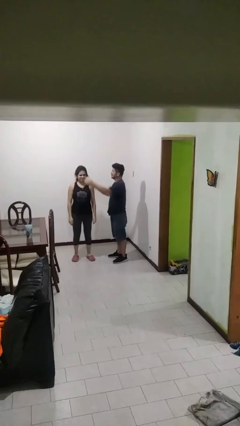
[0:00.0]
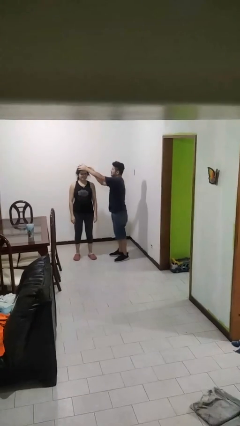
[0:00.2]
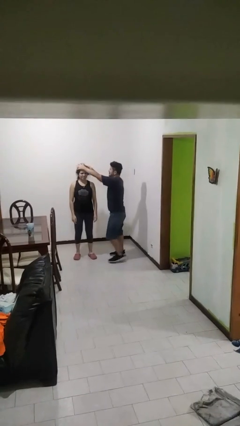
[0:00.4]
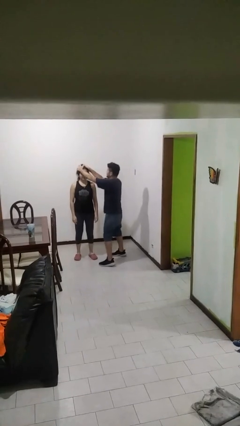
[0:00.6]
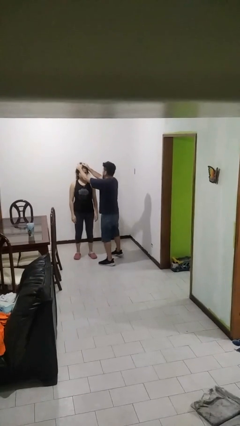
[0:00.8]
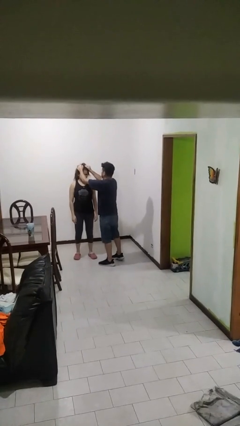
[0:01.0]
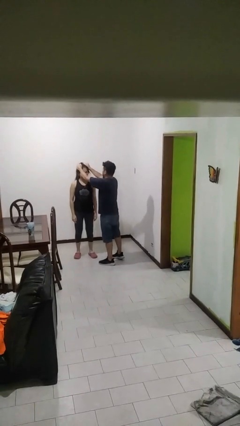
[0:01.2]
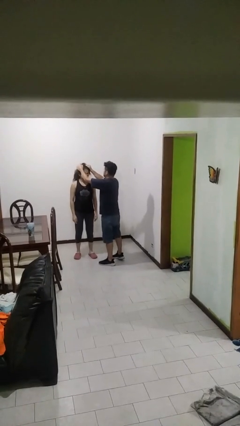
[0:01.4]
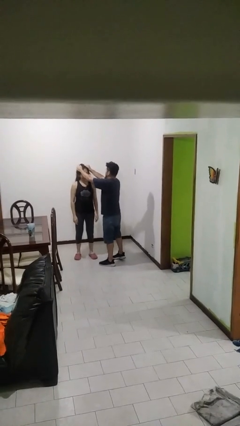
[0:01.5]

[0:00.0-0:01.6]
person grabs person by hair

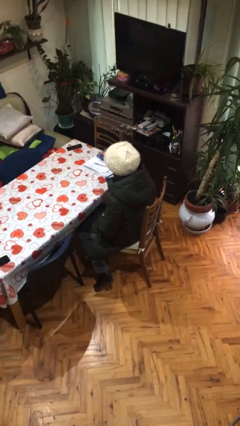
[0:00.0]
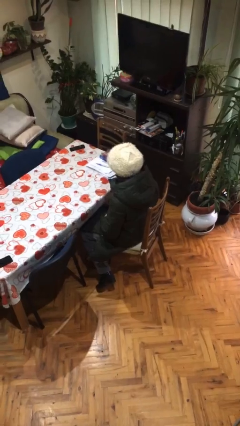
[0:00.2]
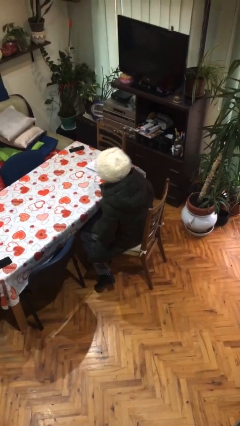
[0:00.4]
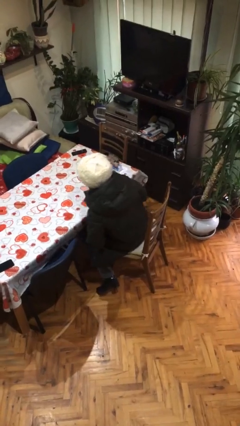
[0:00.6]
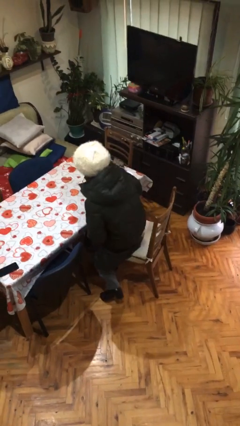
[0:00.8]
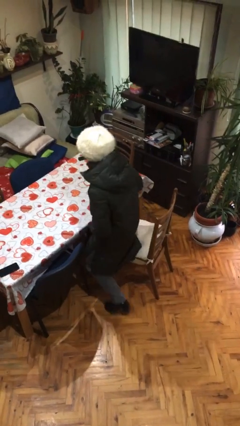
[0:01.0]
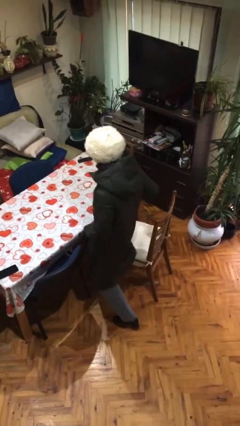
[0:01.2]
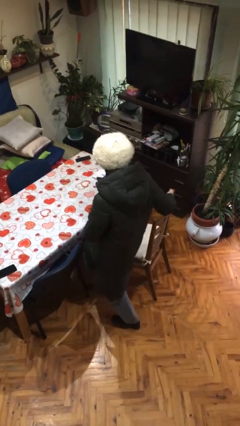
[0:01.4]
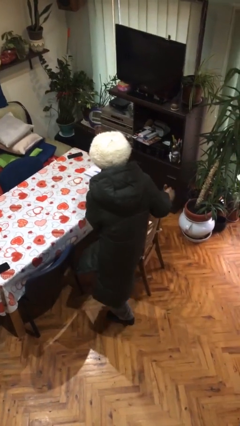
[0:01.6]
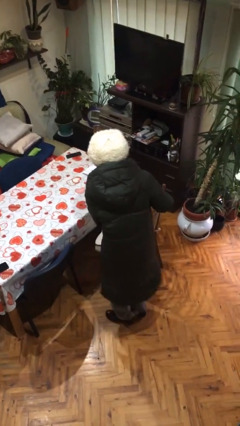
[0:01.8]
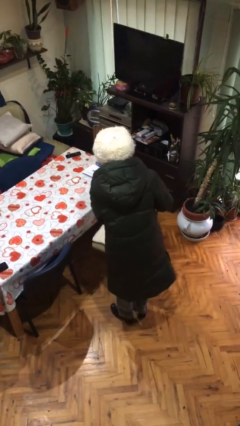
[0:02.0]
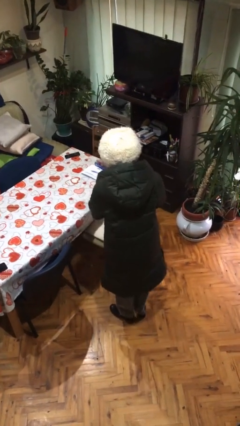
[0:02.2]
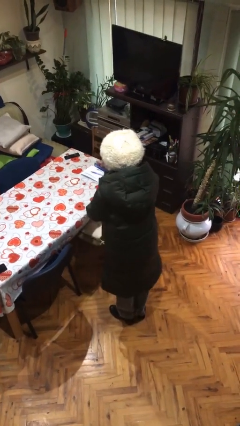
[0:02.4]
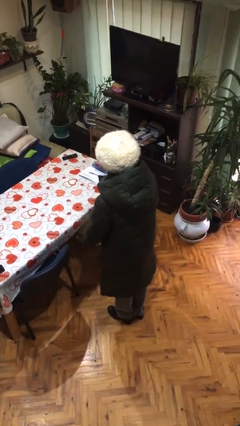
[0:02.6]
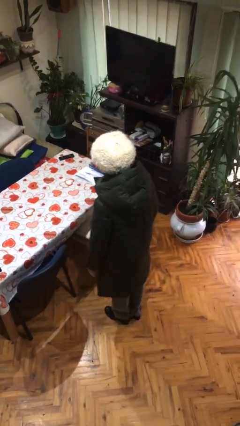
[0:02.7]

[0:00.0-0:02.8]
person stands up

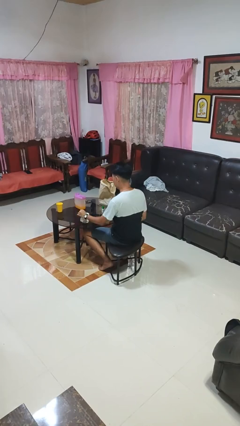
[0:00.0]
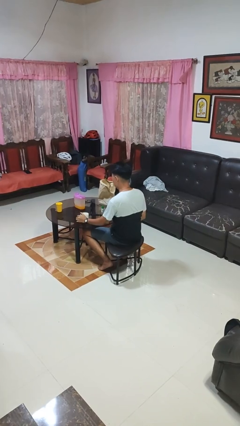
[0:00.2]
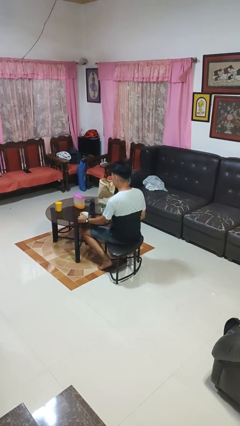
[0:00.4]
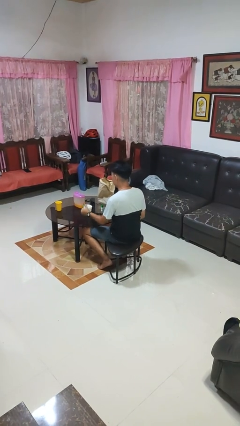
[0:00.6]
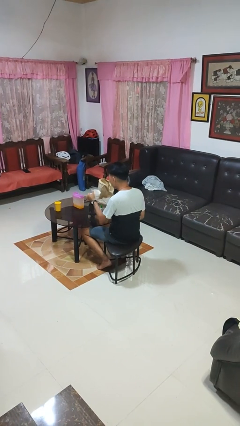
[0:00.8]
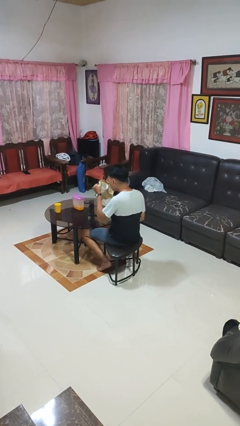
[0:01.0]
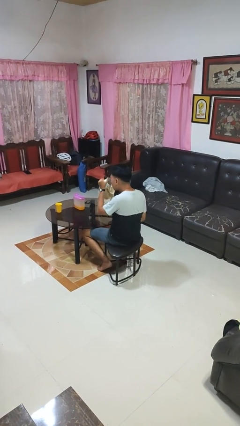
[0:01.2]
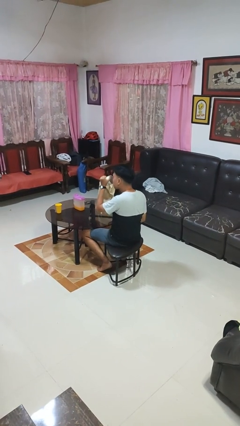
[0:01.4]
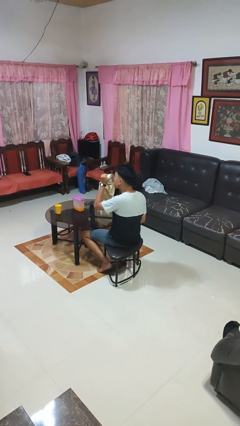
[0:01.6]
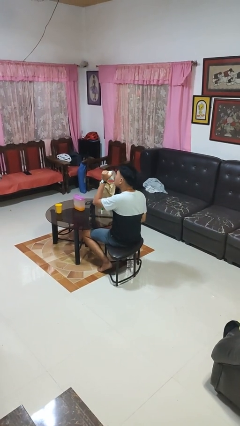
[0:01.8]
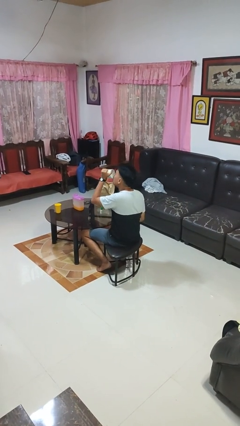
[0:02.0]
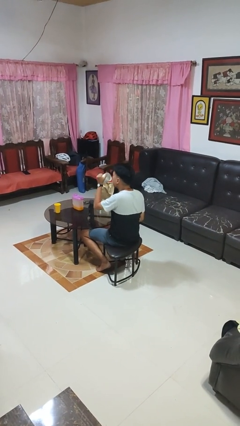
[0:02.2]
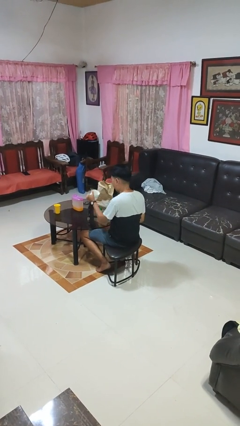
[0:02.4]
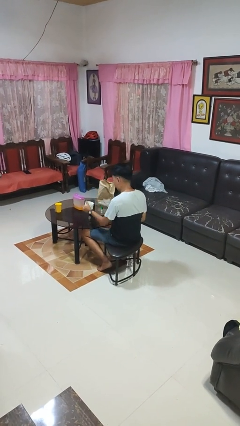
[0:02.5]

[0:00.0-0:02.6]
person drinks from mug

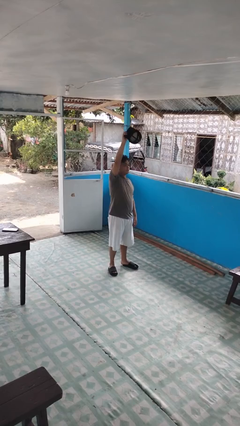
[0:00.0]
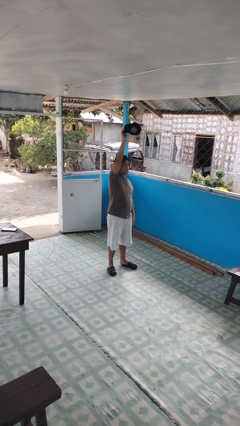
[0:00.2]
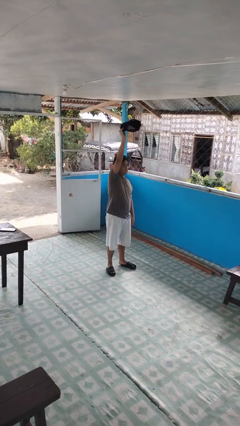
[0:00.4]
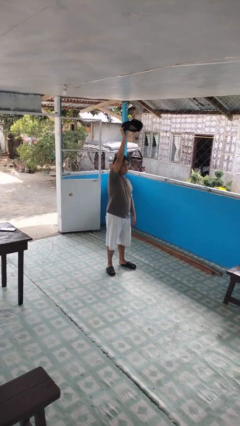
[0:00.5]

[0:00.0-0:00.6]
person drops object

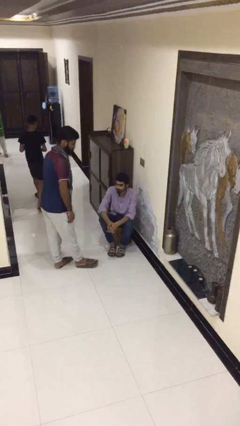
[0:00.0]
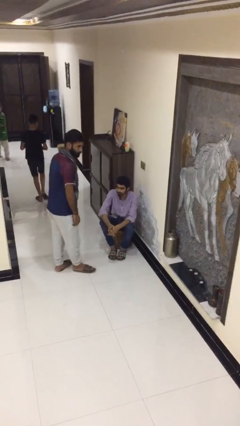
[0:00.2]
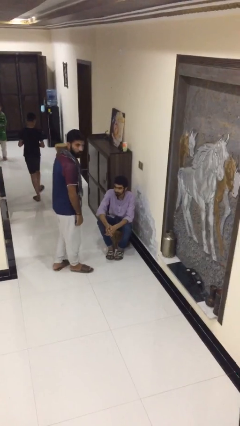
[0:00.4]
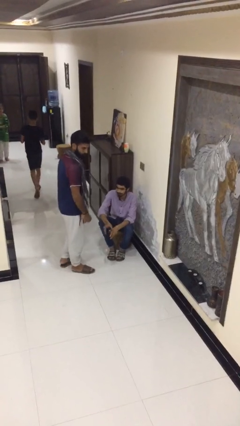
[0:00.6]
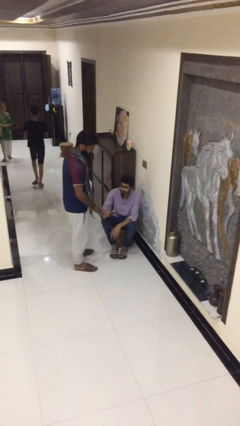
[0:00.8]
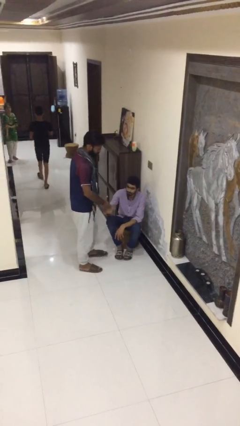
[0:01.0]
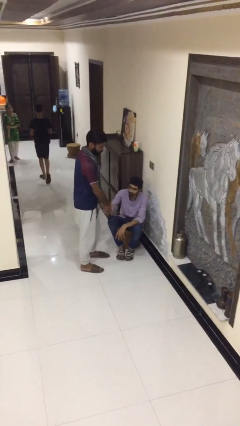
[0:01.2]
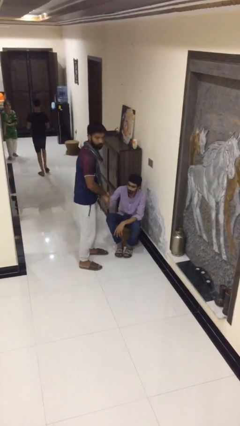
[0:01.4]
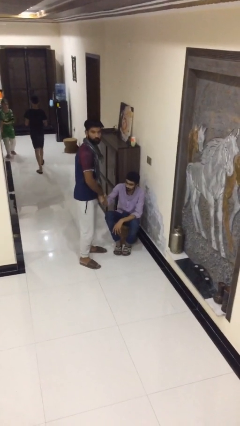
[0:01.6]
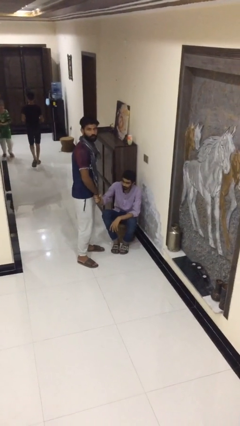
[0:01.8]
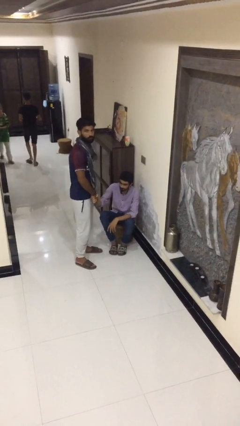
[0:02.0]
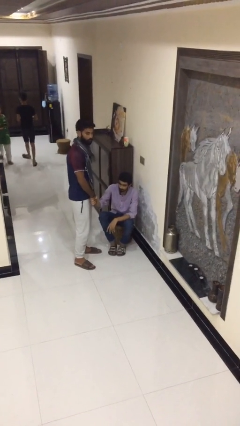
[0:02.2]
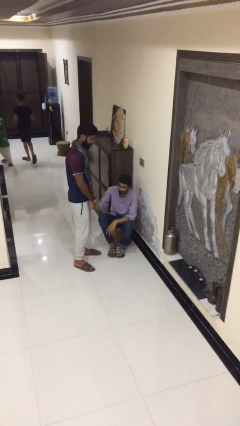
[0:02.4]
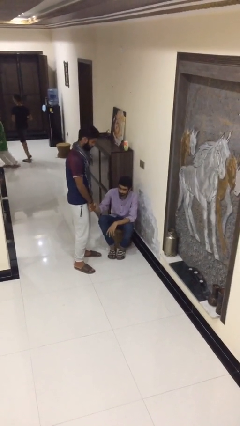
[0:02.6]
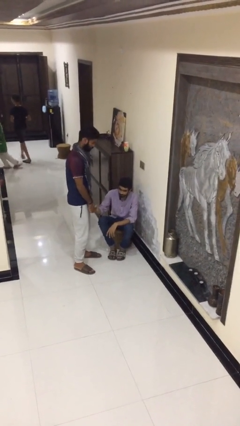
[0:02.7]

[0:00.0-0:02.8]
person shakes hand

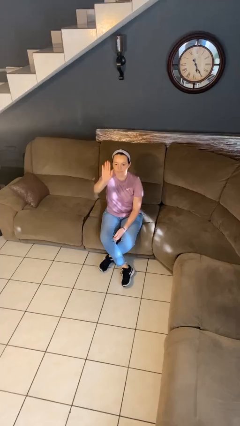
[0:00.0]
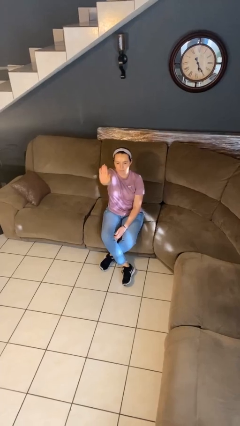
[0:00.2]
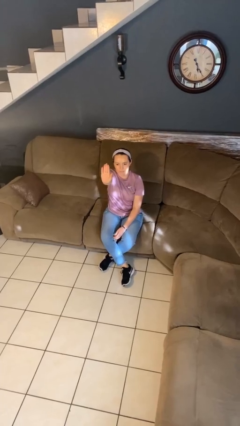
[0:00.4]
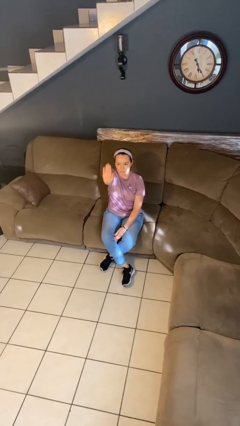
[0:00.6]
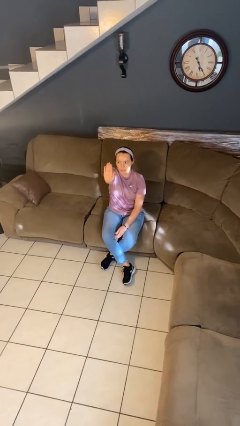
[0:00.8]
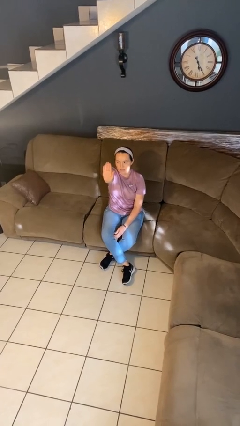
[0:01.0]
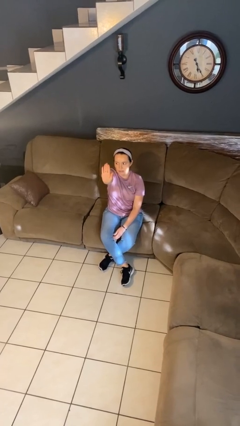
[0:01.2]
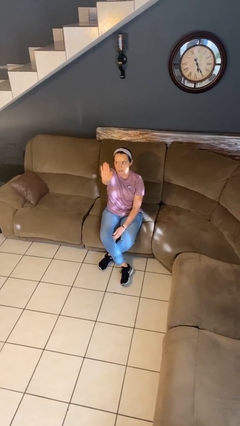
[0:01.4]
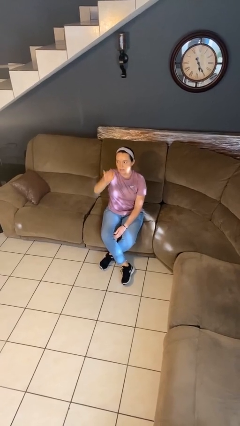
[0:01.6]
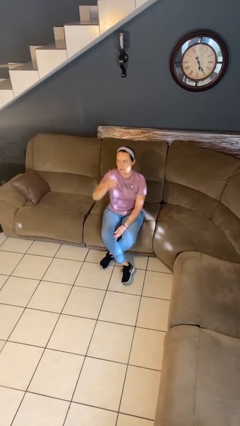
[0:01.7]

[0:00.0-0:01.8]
person gestures stop

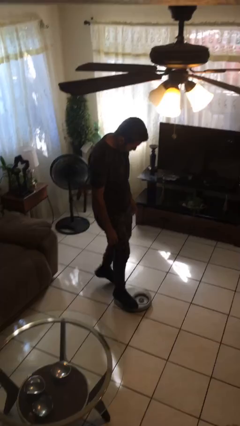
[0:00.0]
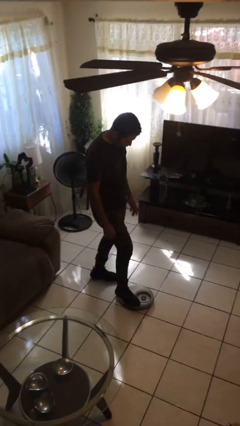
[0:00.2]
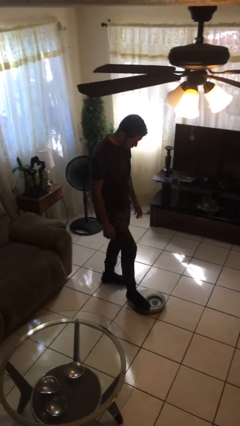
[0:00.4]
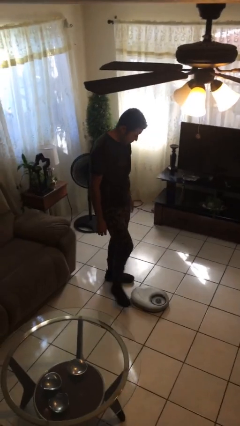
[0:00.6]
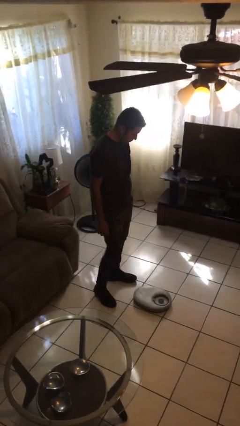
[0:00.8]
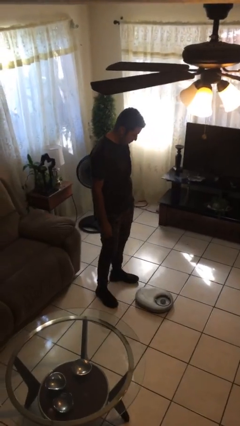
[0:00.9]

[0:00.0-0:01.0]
person uses bodyweight scale

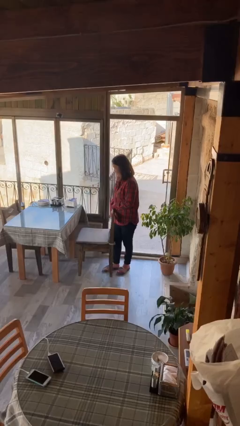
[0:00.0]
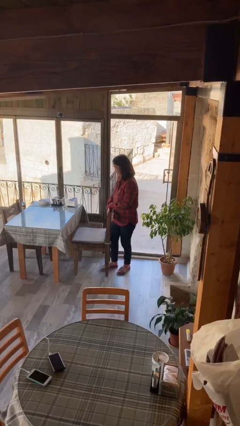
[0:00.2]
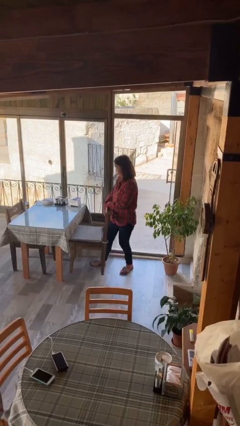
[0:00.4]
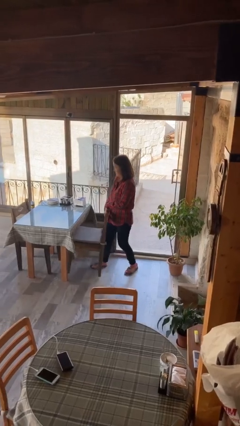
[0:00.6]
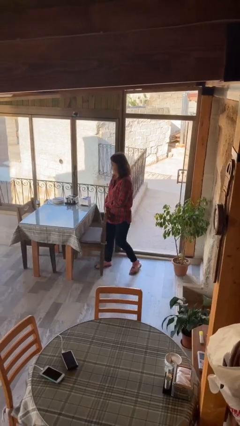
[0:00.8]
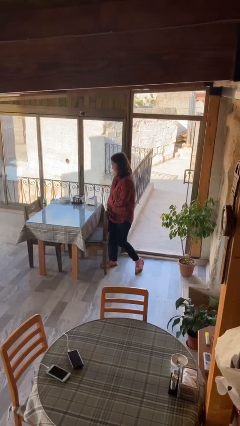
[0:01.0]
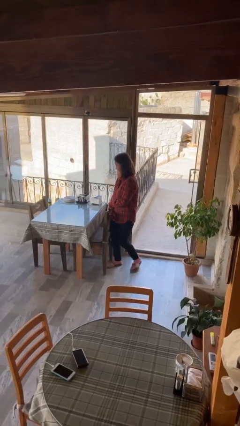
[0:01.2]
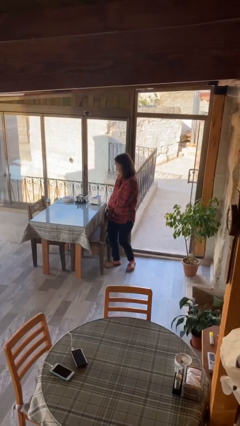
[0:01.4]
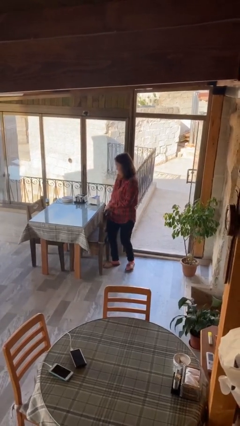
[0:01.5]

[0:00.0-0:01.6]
person pushes in chair

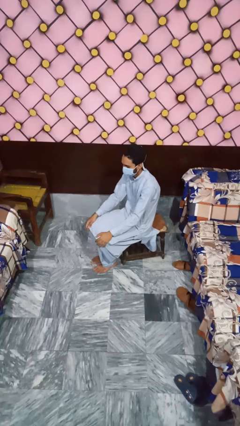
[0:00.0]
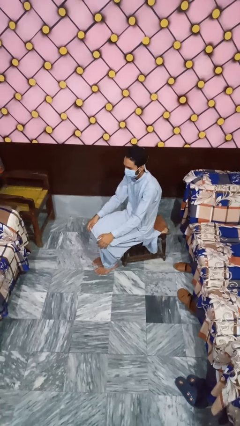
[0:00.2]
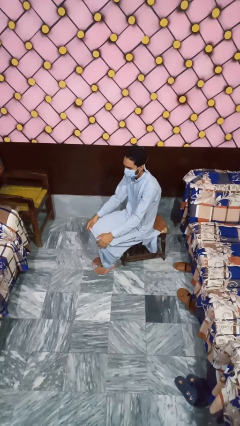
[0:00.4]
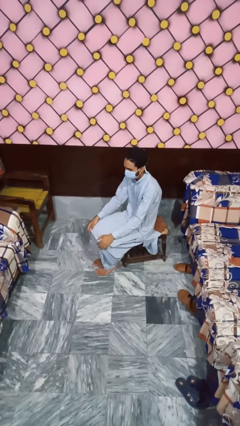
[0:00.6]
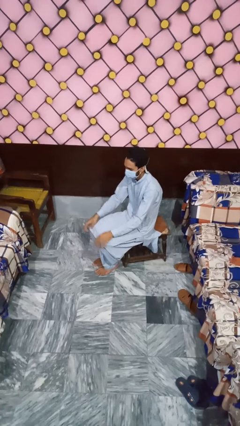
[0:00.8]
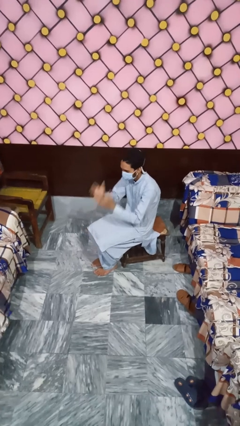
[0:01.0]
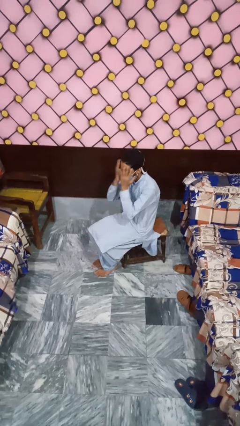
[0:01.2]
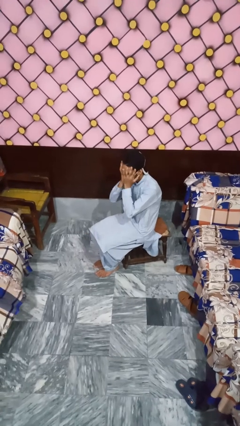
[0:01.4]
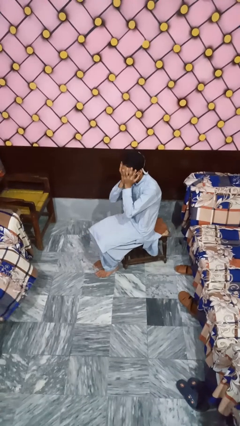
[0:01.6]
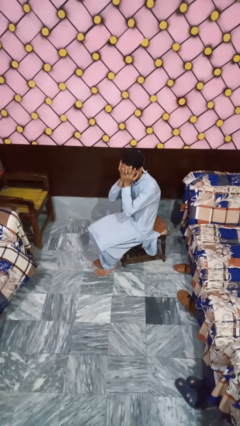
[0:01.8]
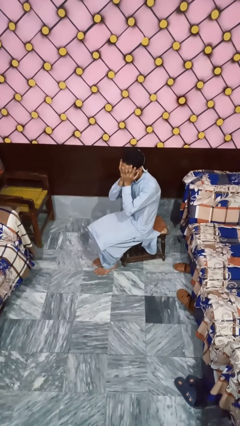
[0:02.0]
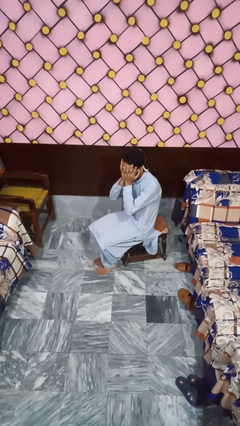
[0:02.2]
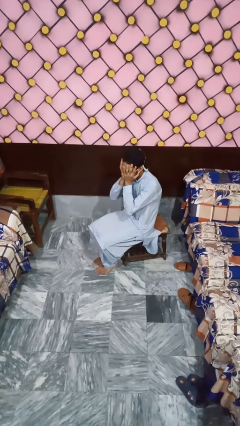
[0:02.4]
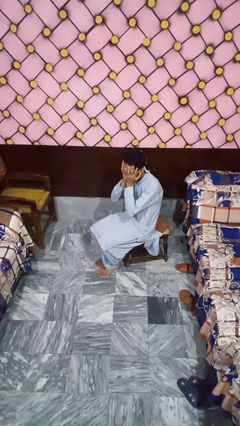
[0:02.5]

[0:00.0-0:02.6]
person covers face with hands
